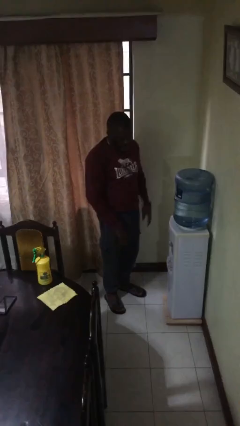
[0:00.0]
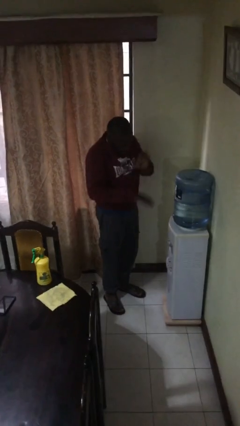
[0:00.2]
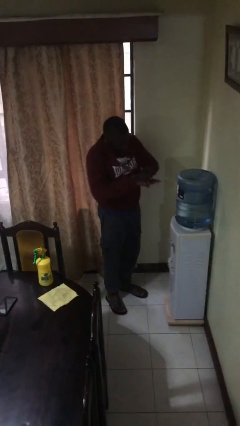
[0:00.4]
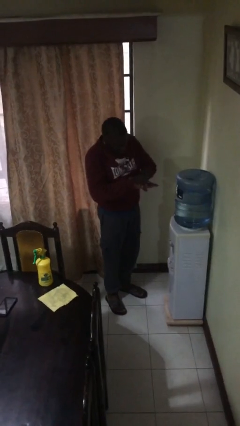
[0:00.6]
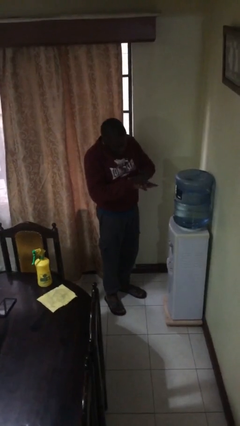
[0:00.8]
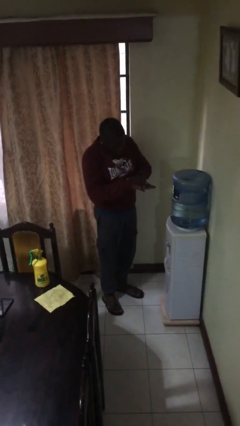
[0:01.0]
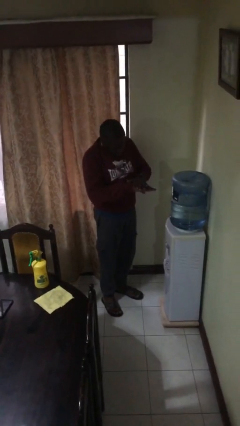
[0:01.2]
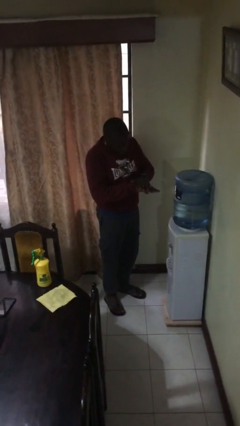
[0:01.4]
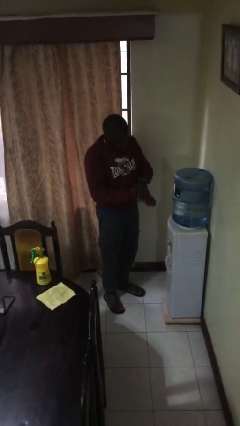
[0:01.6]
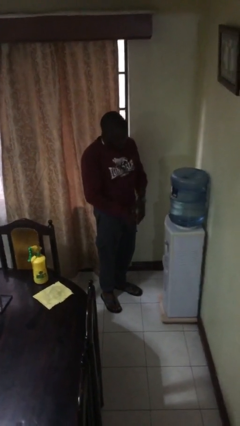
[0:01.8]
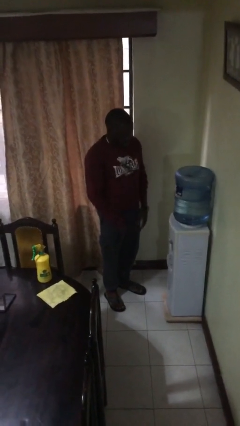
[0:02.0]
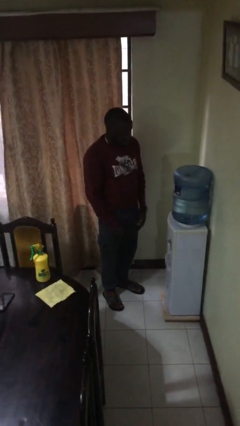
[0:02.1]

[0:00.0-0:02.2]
person swats bug

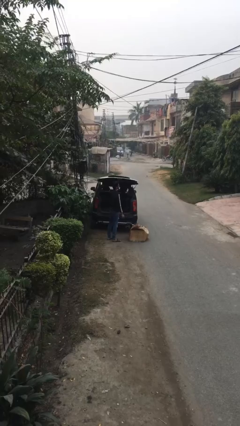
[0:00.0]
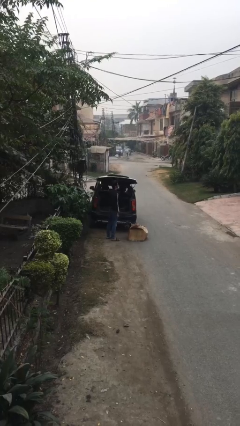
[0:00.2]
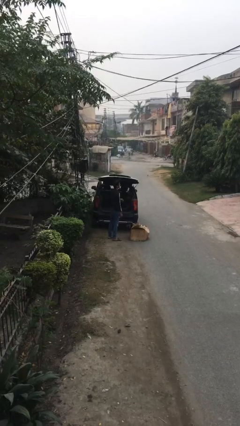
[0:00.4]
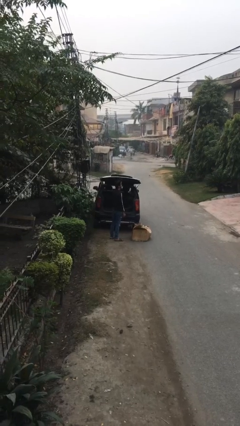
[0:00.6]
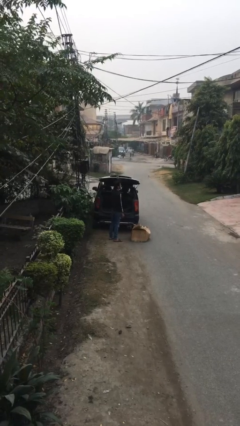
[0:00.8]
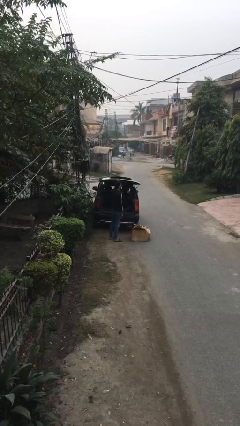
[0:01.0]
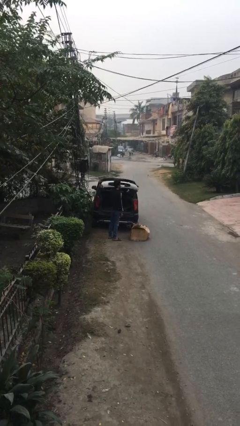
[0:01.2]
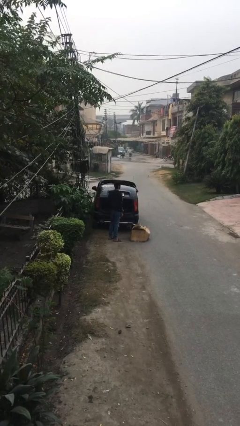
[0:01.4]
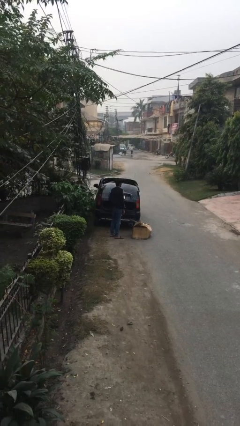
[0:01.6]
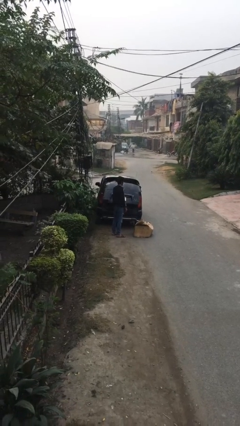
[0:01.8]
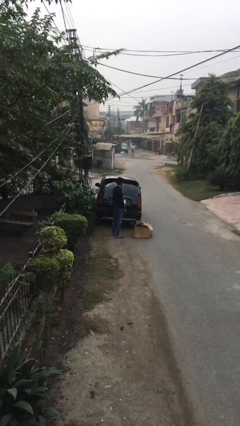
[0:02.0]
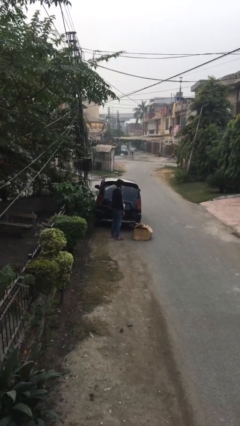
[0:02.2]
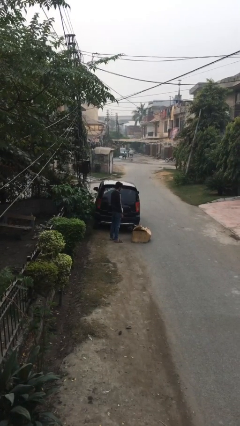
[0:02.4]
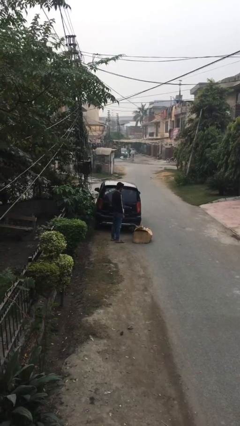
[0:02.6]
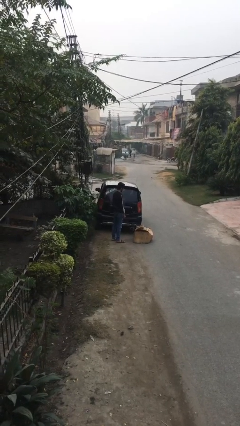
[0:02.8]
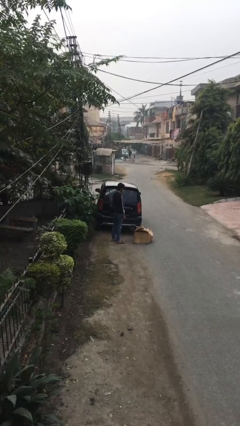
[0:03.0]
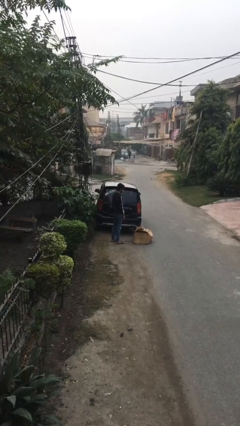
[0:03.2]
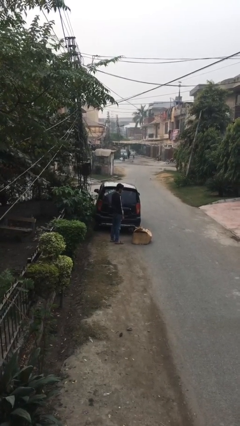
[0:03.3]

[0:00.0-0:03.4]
person closes car trunk

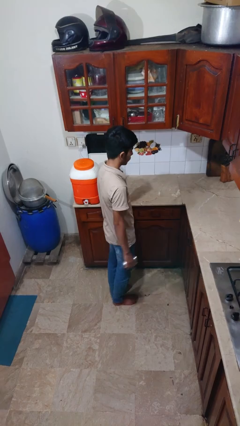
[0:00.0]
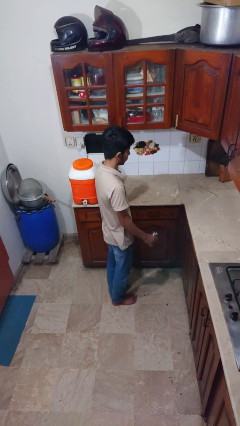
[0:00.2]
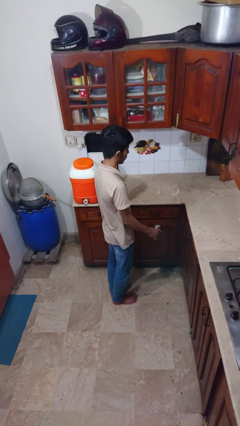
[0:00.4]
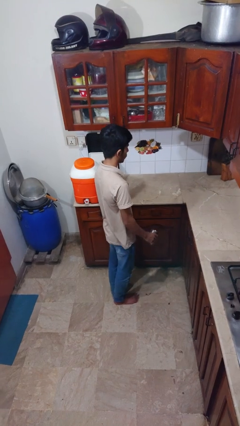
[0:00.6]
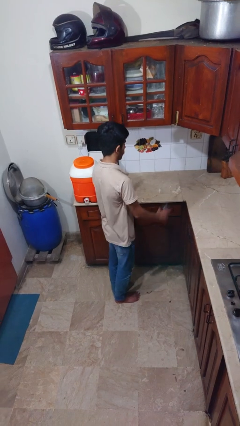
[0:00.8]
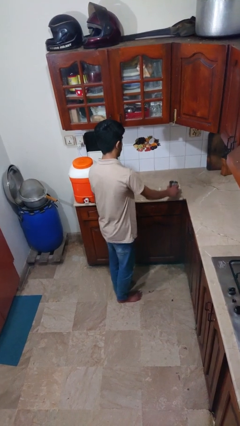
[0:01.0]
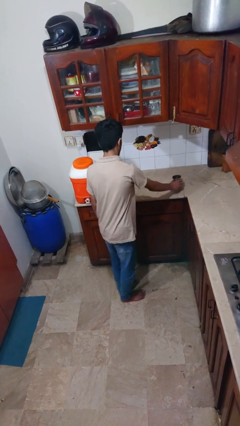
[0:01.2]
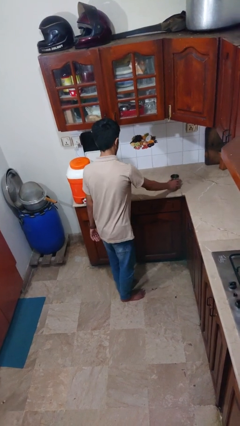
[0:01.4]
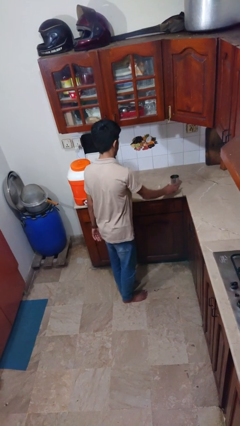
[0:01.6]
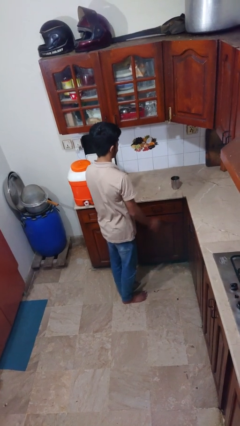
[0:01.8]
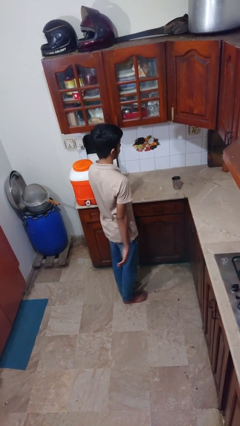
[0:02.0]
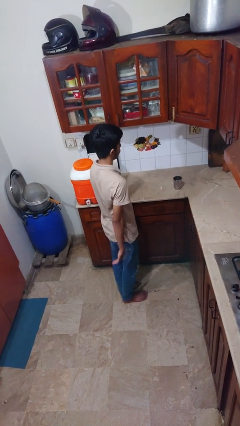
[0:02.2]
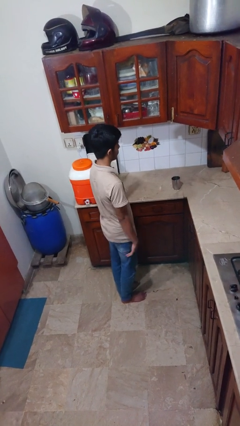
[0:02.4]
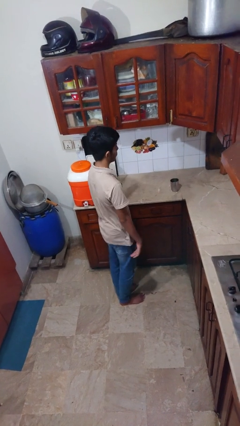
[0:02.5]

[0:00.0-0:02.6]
person puts down object on countertop

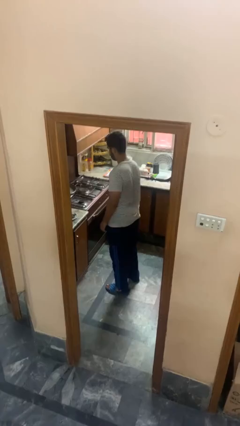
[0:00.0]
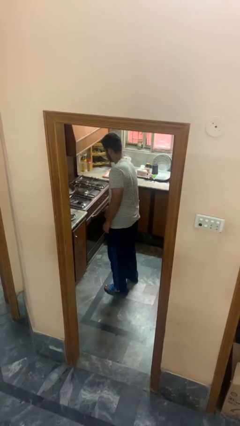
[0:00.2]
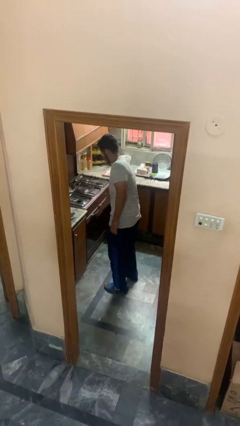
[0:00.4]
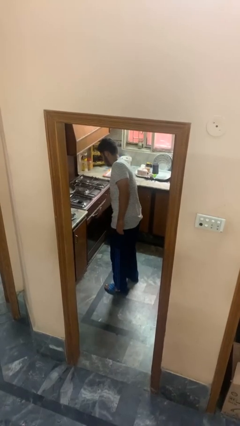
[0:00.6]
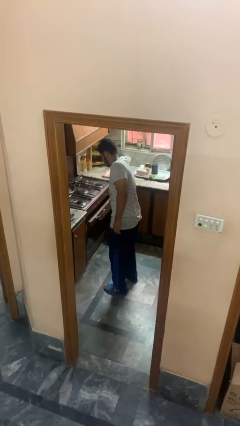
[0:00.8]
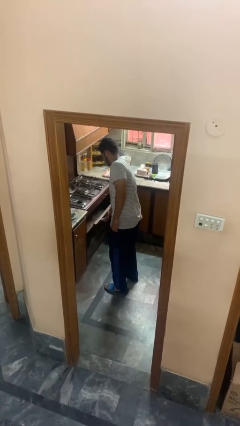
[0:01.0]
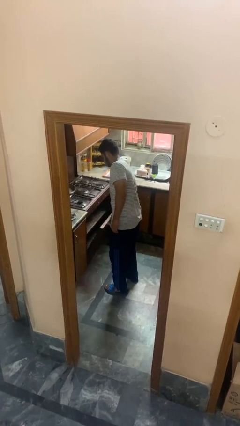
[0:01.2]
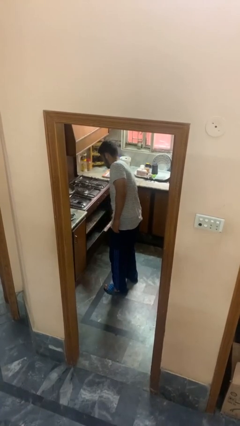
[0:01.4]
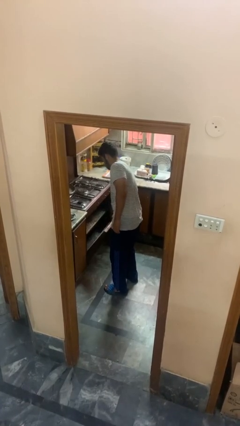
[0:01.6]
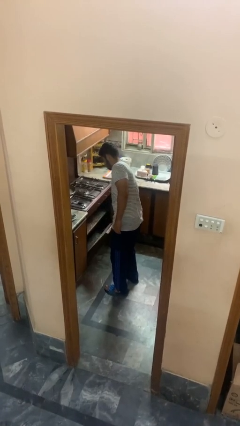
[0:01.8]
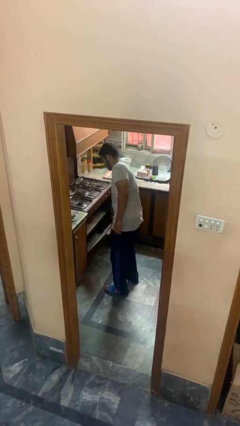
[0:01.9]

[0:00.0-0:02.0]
person opens oven door

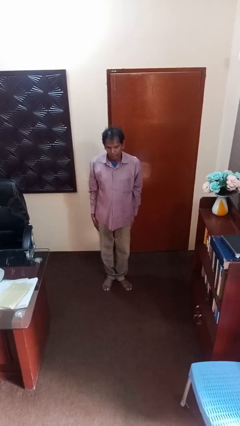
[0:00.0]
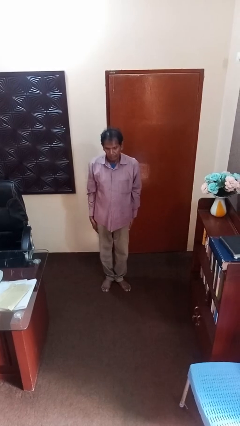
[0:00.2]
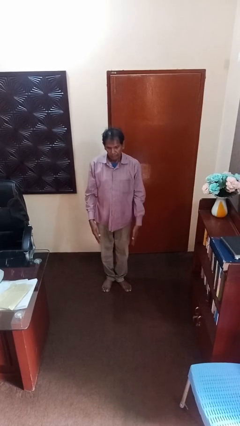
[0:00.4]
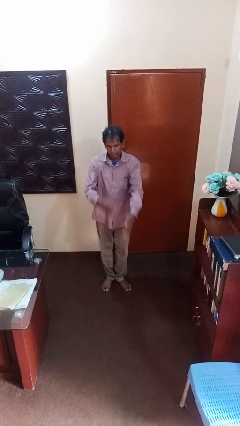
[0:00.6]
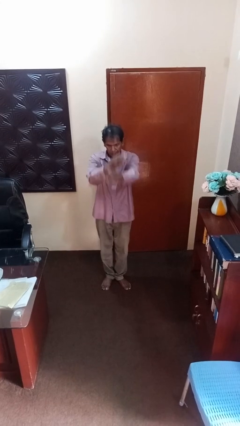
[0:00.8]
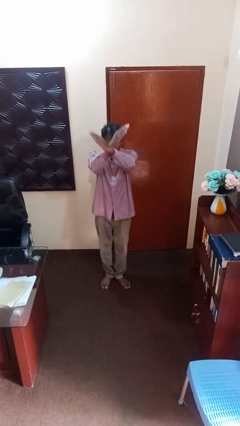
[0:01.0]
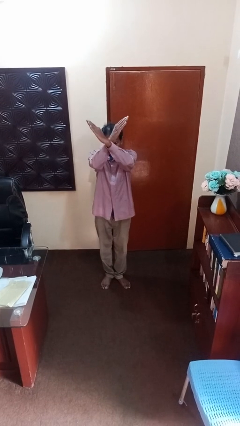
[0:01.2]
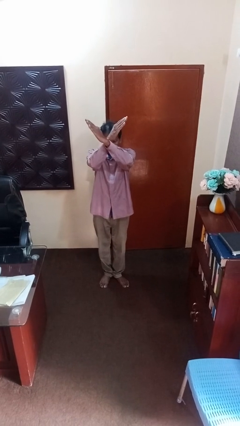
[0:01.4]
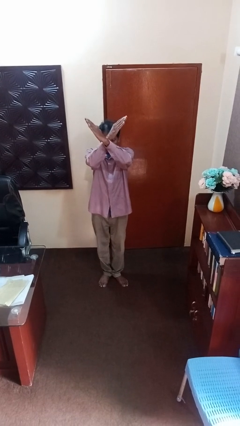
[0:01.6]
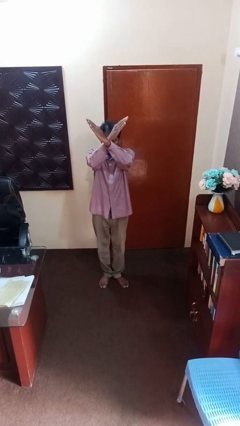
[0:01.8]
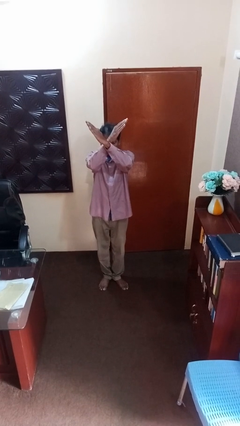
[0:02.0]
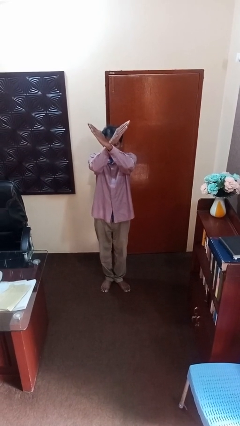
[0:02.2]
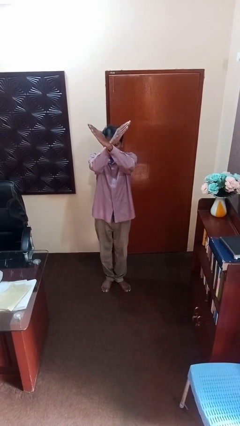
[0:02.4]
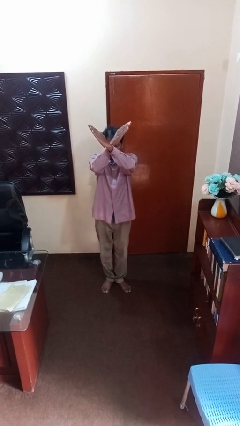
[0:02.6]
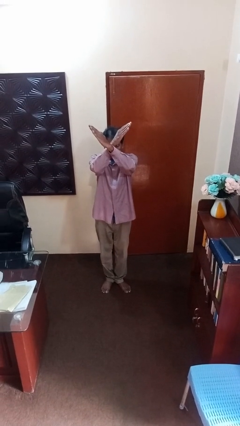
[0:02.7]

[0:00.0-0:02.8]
person gestures arms x

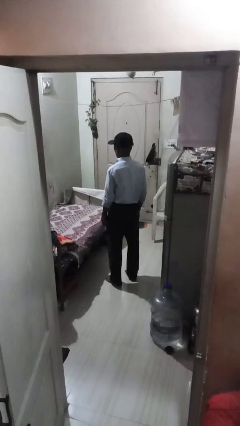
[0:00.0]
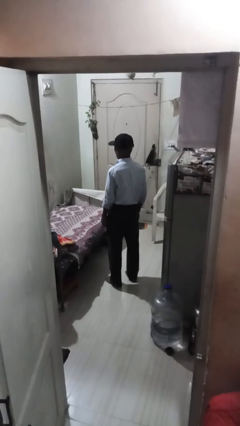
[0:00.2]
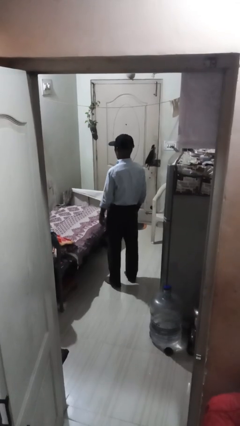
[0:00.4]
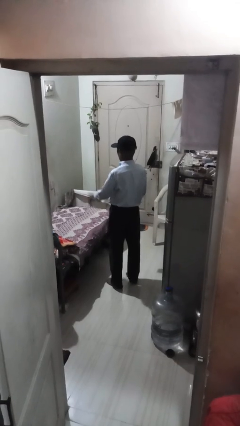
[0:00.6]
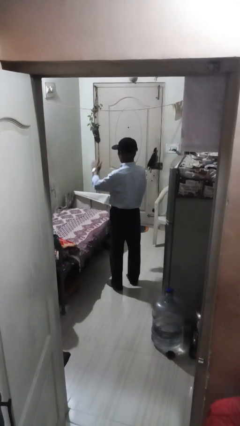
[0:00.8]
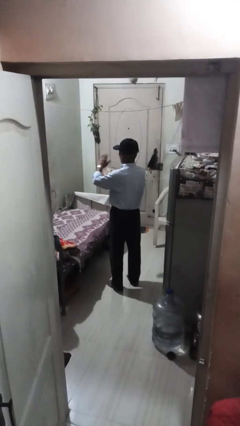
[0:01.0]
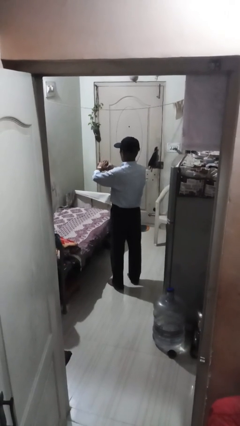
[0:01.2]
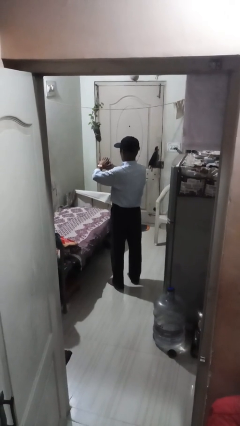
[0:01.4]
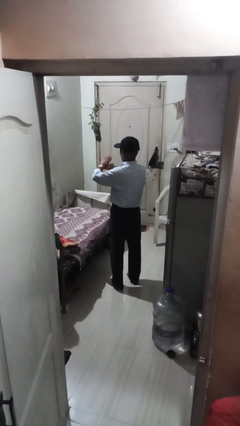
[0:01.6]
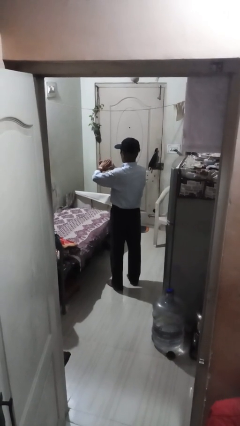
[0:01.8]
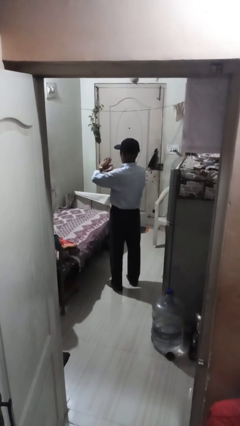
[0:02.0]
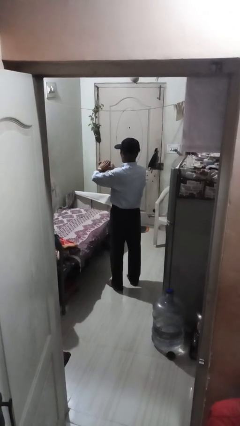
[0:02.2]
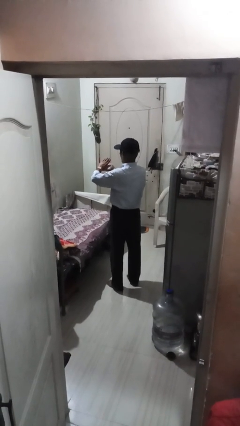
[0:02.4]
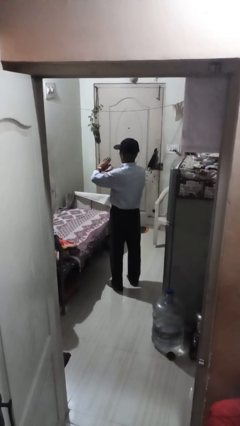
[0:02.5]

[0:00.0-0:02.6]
person claps hands

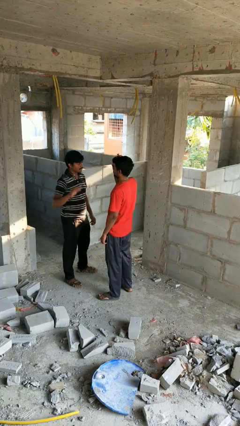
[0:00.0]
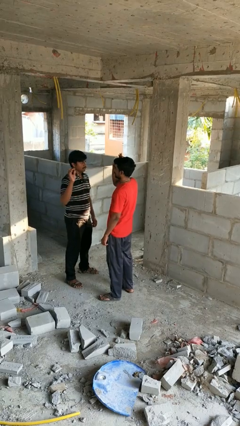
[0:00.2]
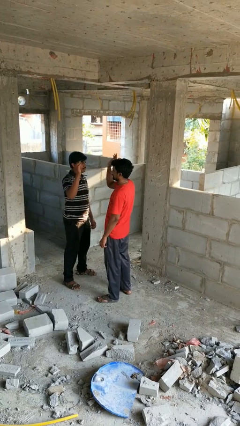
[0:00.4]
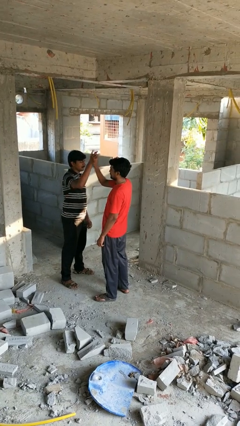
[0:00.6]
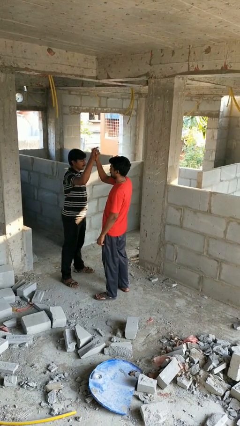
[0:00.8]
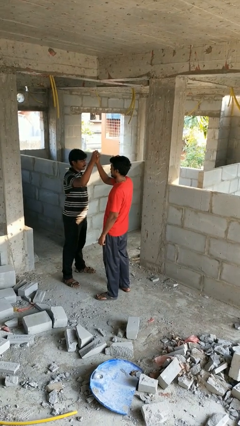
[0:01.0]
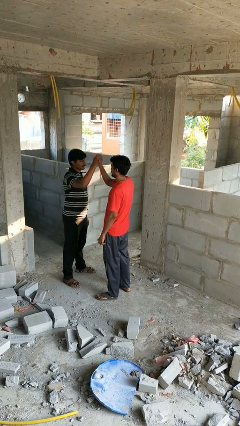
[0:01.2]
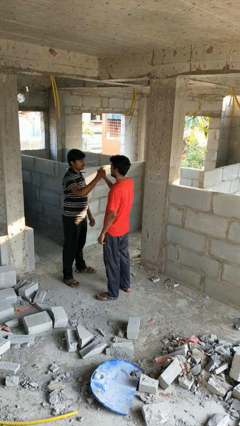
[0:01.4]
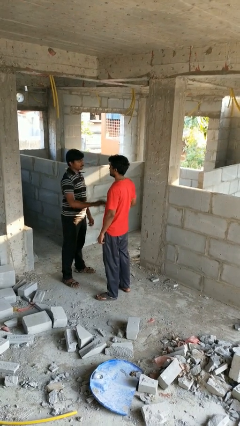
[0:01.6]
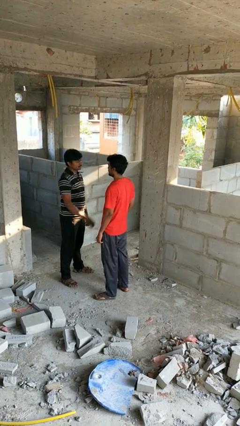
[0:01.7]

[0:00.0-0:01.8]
person highfives hand
